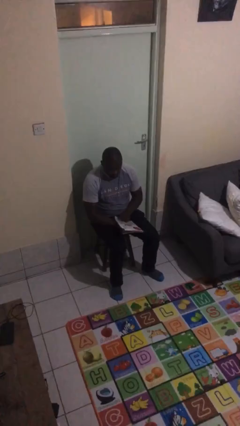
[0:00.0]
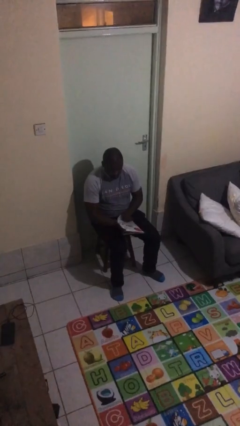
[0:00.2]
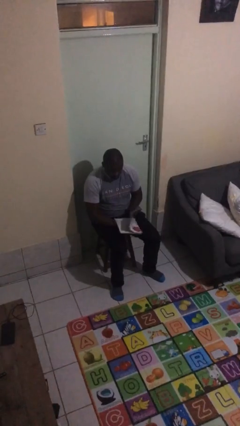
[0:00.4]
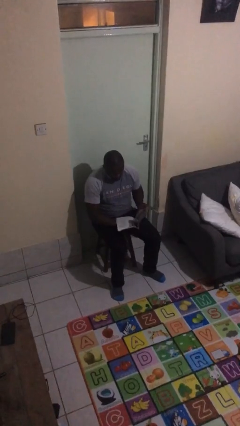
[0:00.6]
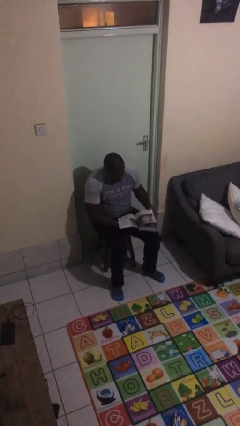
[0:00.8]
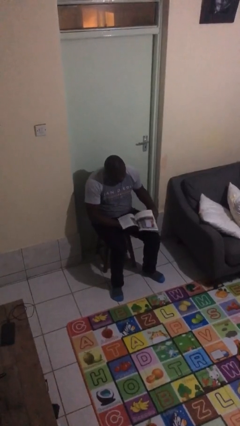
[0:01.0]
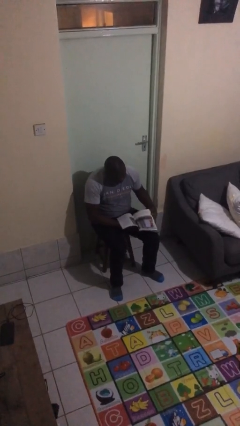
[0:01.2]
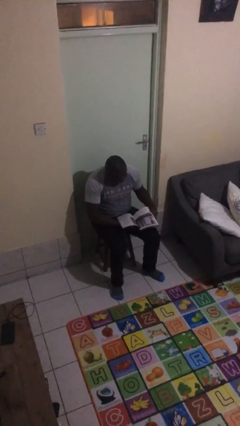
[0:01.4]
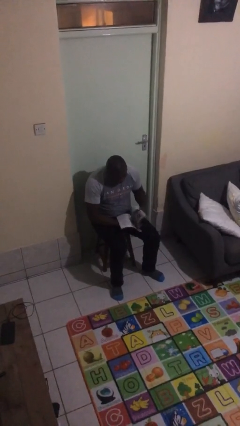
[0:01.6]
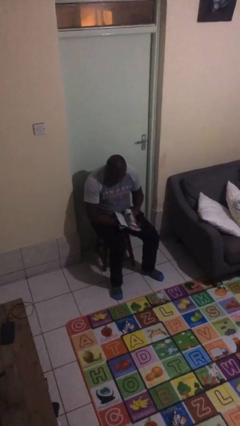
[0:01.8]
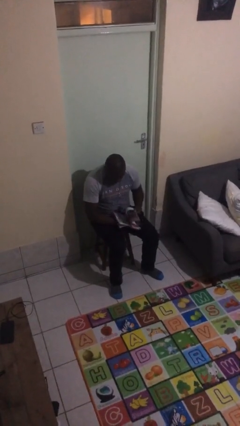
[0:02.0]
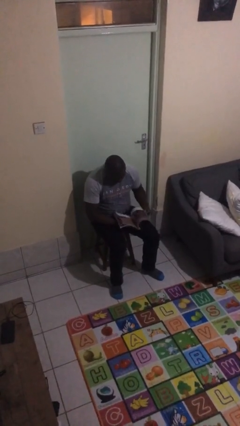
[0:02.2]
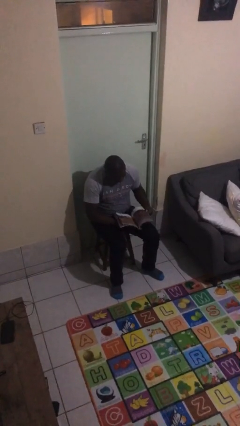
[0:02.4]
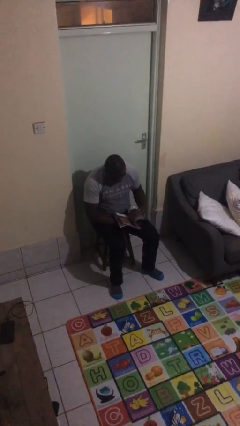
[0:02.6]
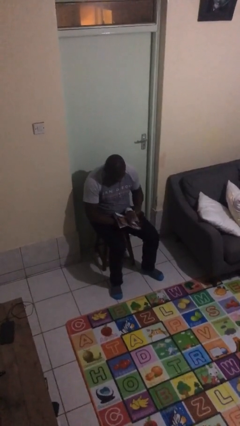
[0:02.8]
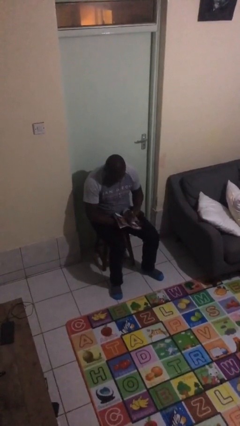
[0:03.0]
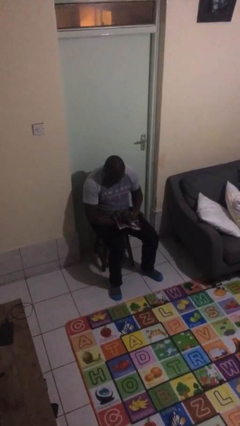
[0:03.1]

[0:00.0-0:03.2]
person reads magazine

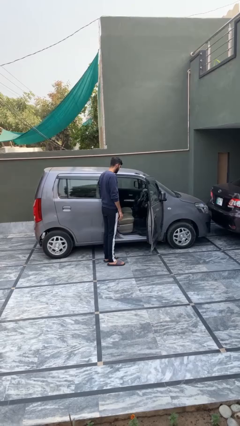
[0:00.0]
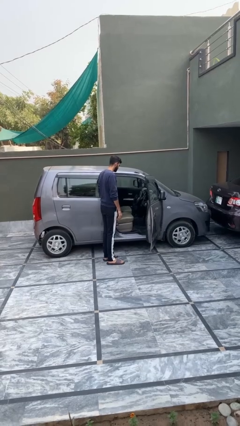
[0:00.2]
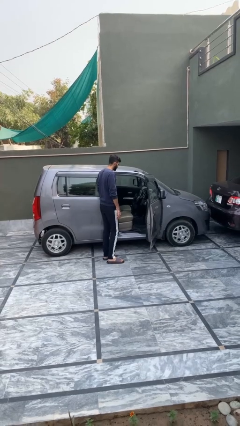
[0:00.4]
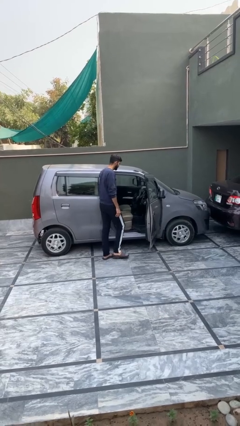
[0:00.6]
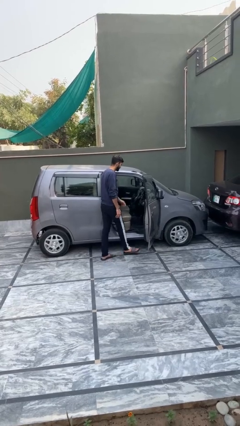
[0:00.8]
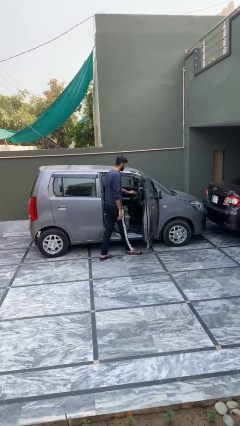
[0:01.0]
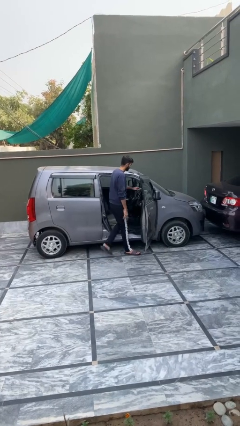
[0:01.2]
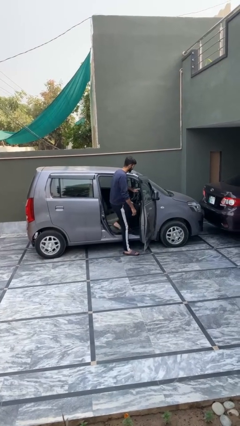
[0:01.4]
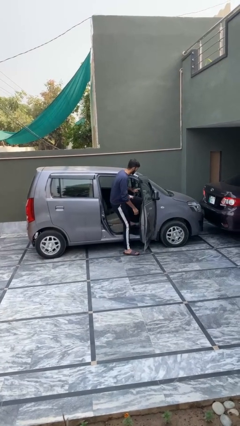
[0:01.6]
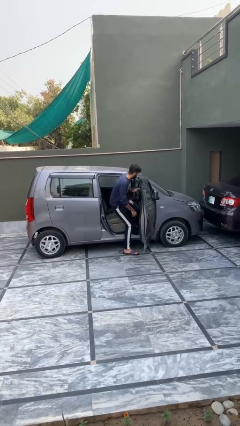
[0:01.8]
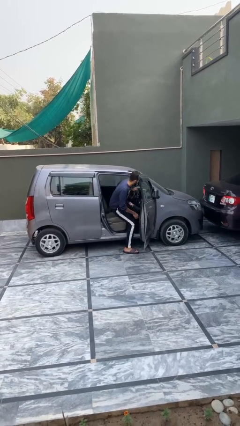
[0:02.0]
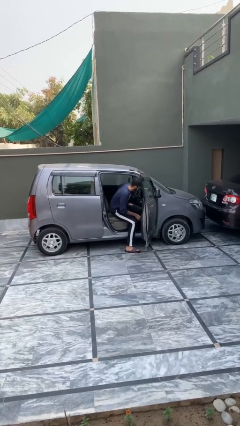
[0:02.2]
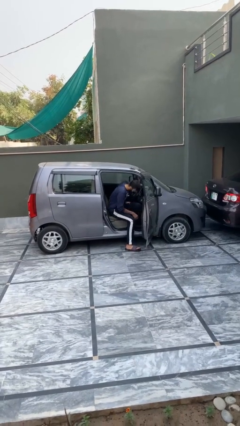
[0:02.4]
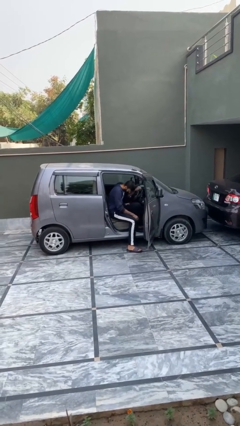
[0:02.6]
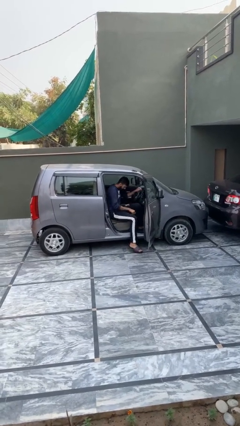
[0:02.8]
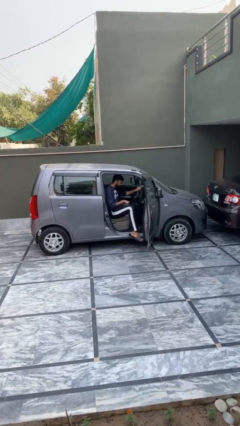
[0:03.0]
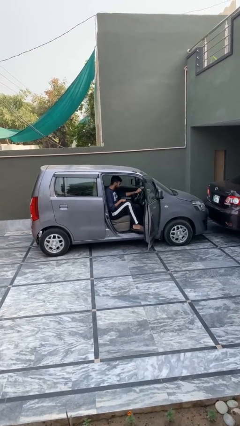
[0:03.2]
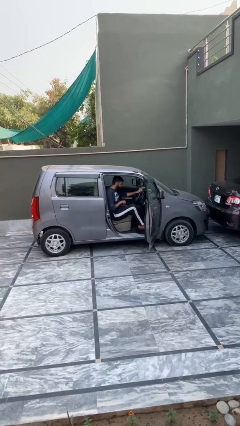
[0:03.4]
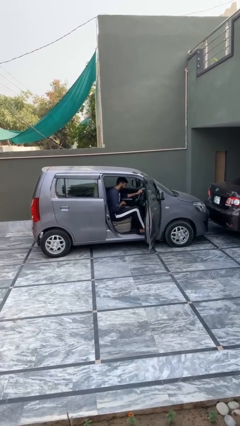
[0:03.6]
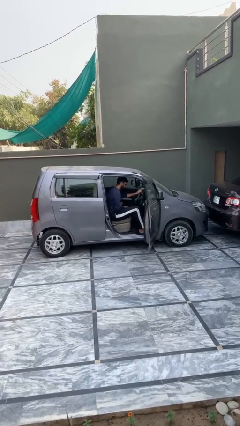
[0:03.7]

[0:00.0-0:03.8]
person enters car

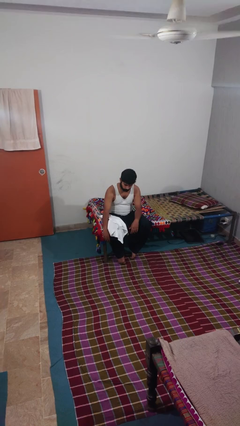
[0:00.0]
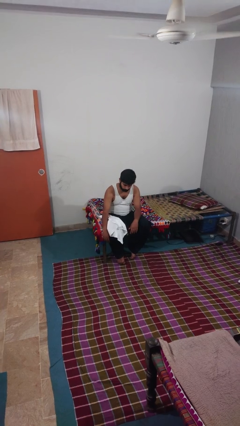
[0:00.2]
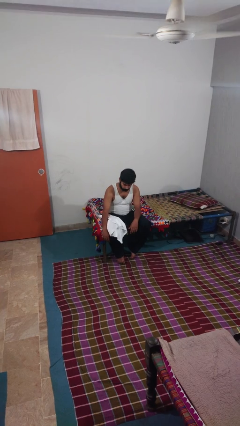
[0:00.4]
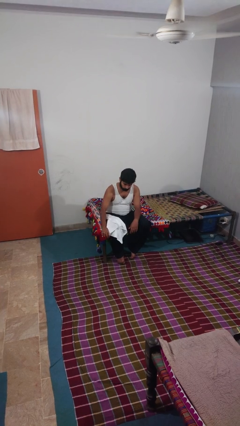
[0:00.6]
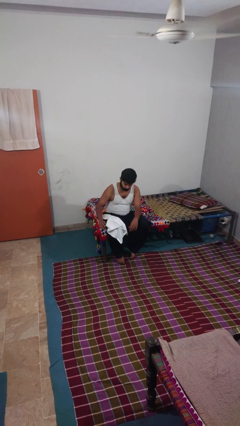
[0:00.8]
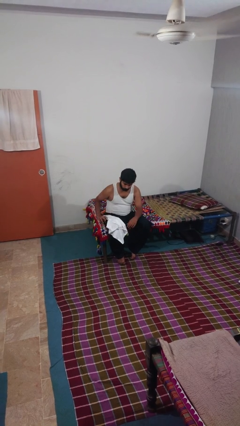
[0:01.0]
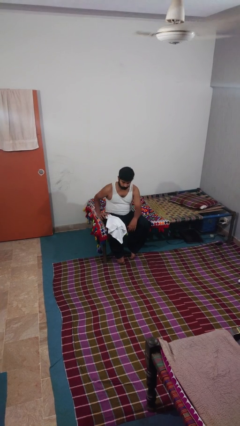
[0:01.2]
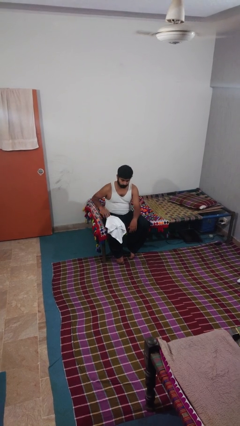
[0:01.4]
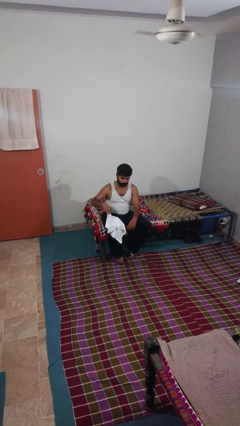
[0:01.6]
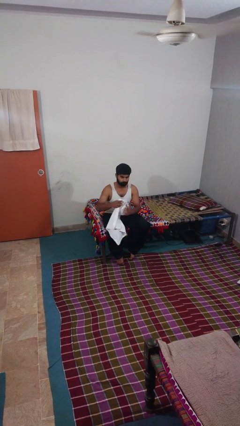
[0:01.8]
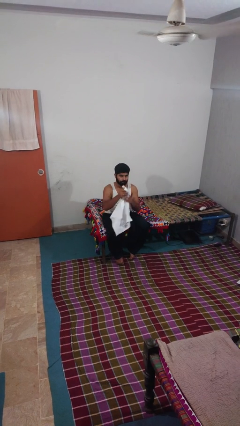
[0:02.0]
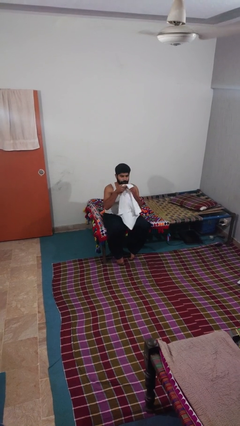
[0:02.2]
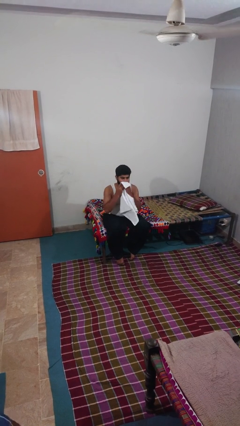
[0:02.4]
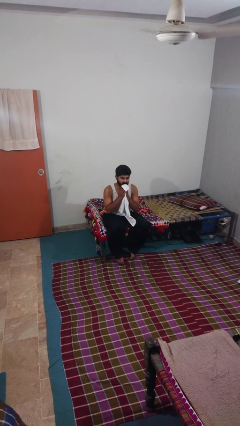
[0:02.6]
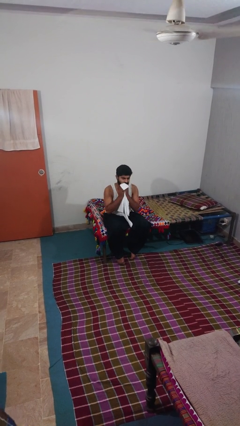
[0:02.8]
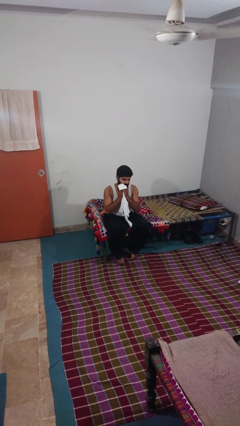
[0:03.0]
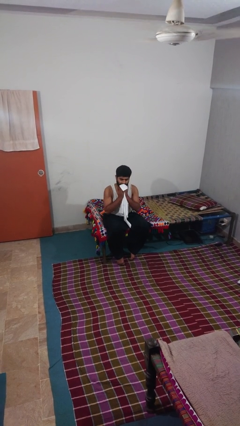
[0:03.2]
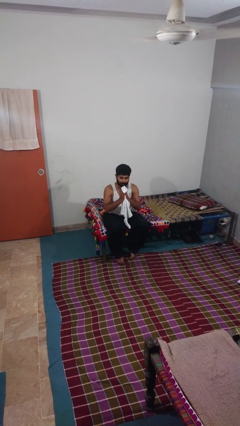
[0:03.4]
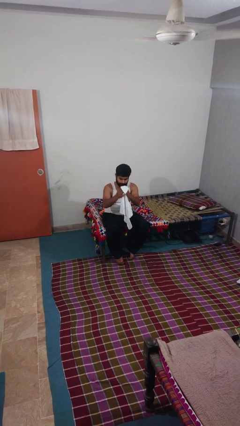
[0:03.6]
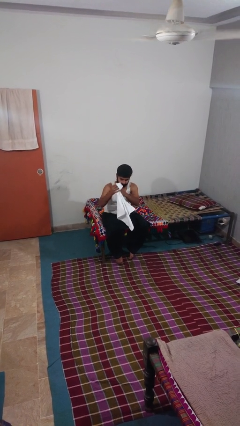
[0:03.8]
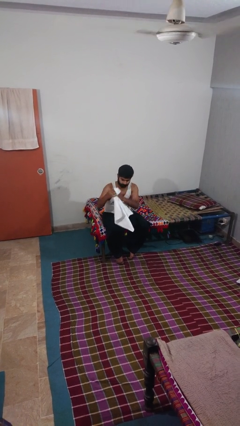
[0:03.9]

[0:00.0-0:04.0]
person wipes mouth with napkin

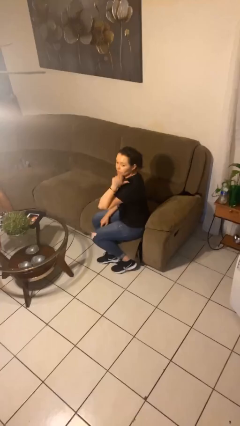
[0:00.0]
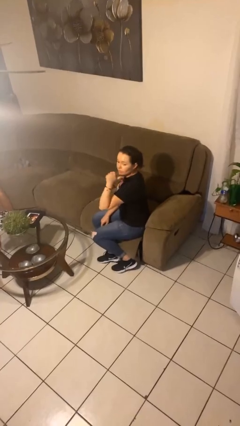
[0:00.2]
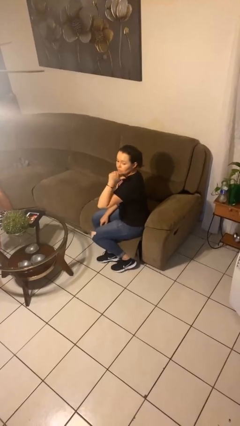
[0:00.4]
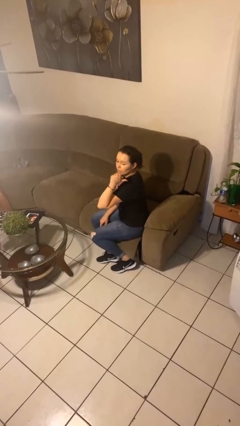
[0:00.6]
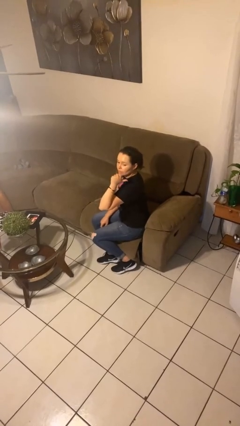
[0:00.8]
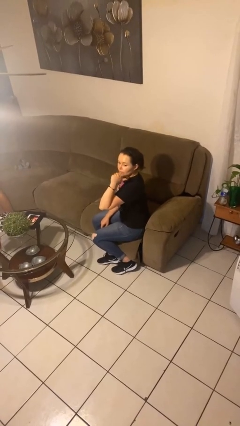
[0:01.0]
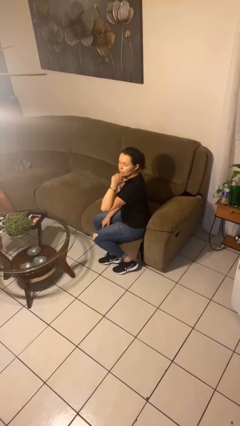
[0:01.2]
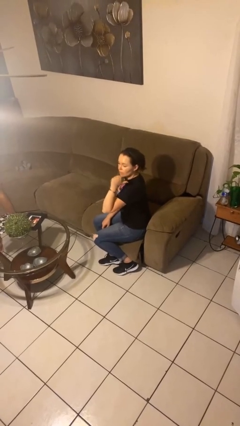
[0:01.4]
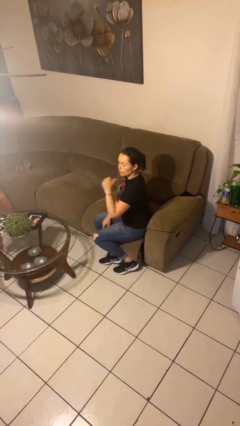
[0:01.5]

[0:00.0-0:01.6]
person gestures behind me

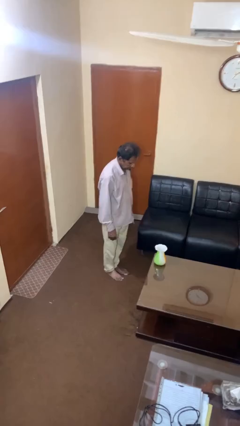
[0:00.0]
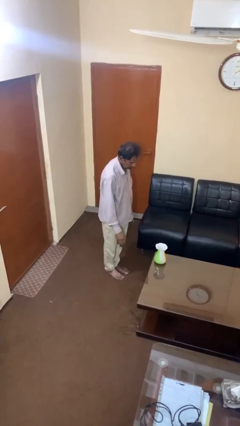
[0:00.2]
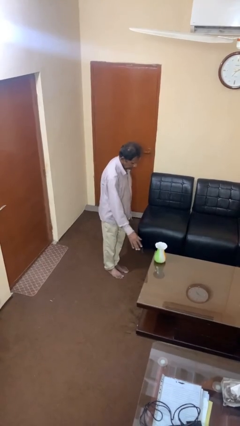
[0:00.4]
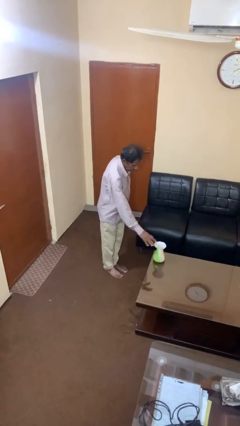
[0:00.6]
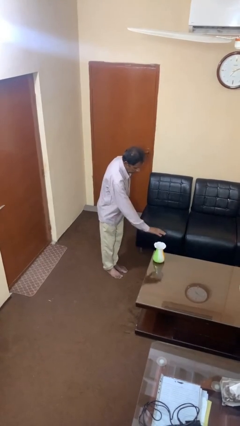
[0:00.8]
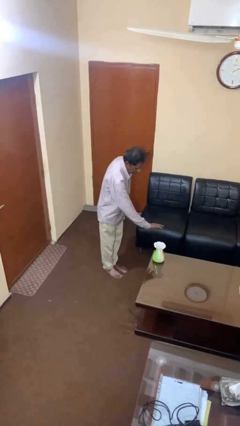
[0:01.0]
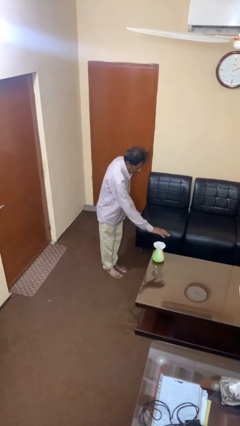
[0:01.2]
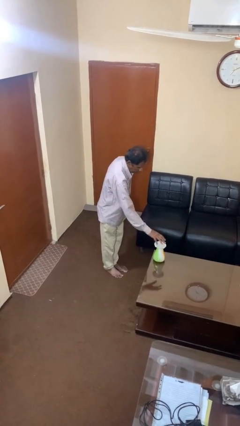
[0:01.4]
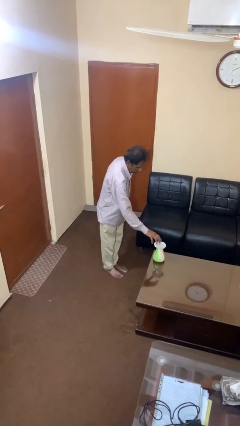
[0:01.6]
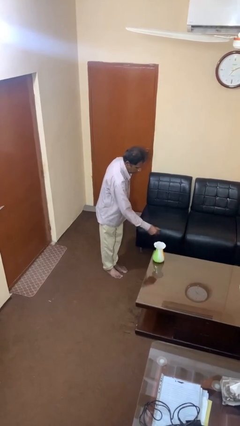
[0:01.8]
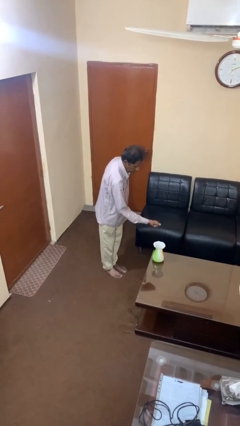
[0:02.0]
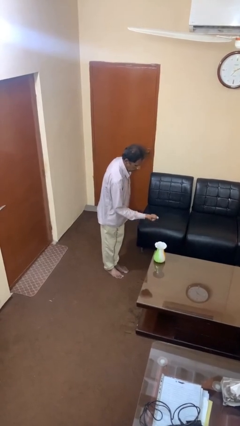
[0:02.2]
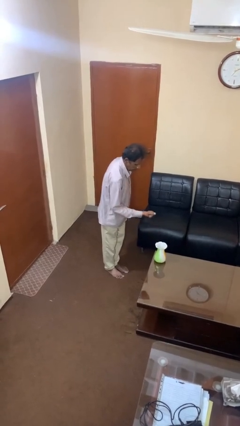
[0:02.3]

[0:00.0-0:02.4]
person waves hand over object

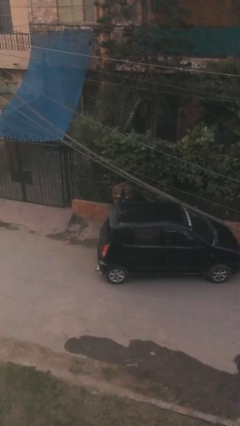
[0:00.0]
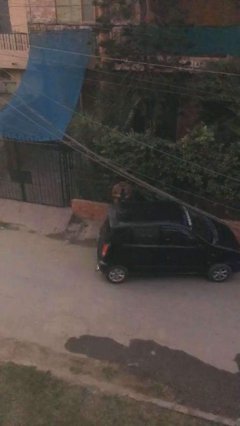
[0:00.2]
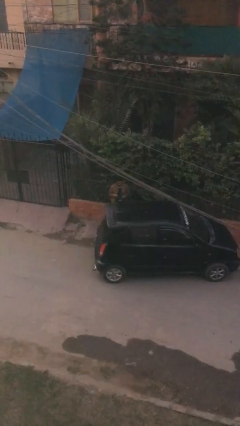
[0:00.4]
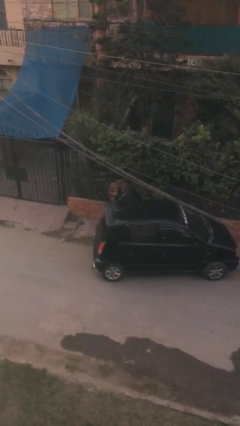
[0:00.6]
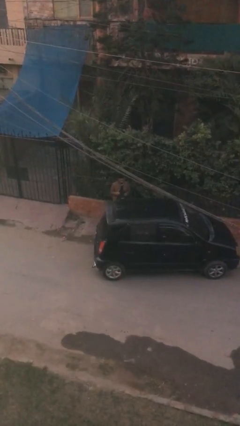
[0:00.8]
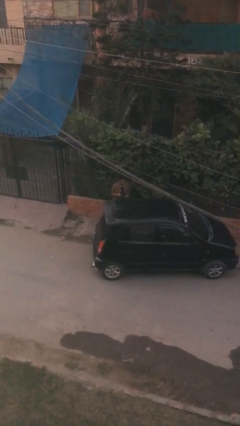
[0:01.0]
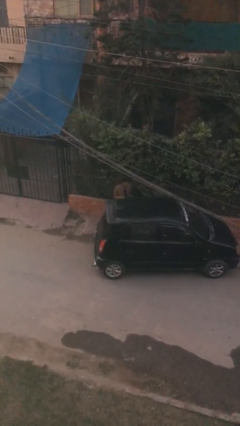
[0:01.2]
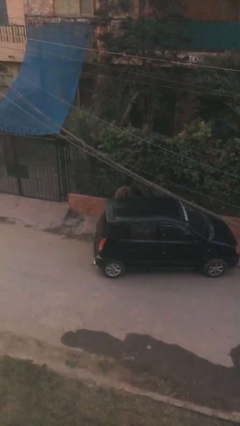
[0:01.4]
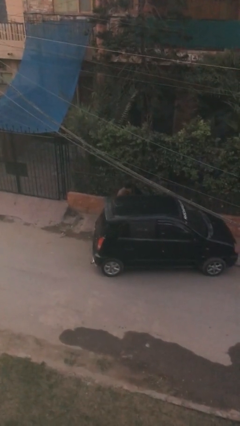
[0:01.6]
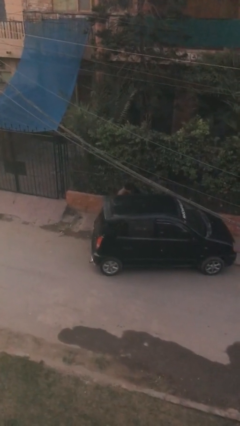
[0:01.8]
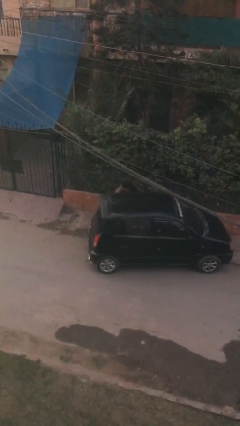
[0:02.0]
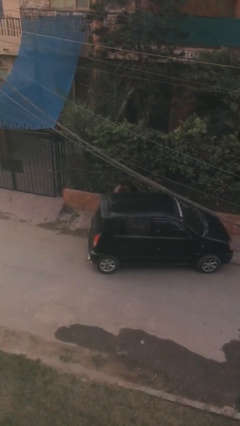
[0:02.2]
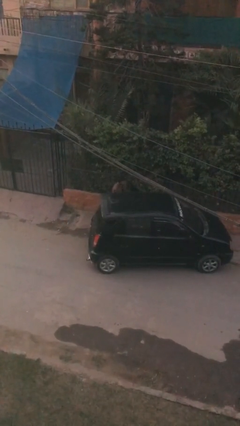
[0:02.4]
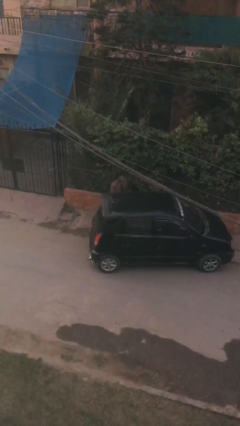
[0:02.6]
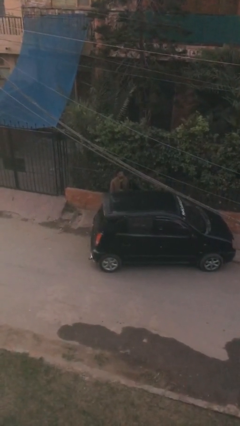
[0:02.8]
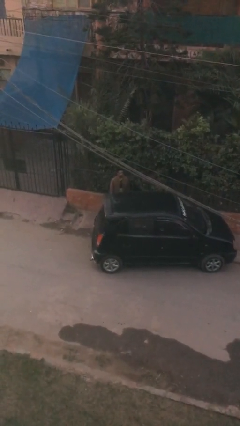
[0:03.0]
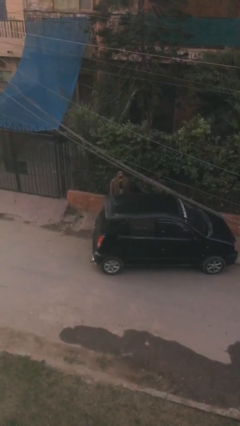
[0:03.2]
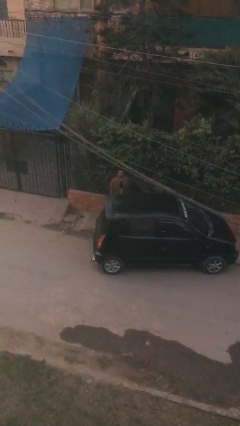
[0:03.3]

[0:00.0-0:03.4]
person loads car
